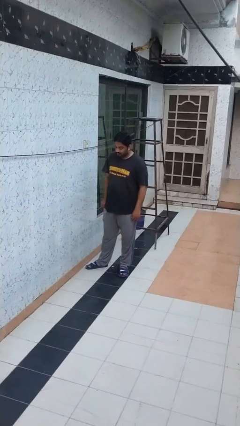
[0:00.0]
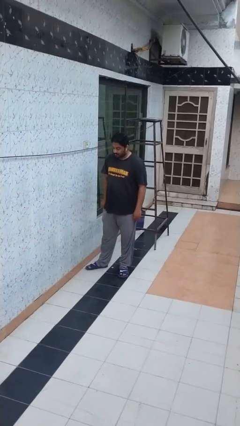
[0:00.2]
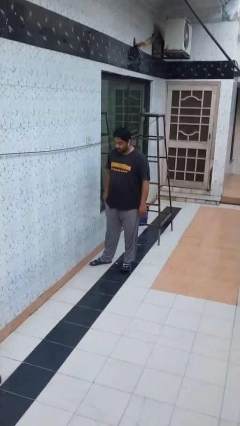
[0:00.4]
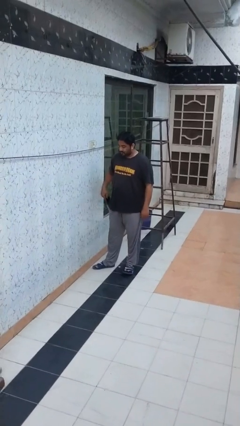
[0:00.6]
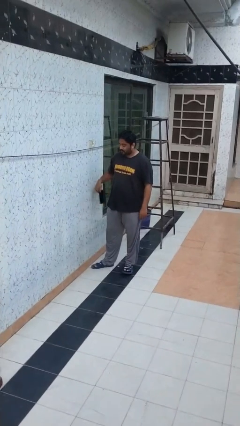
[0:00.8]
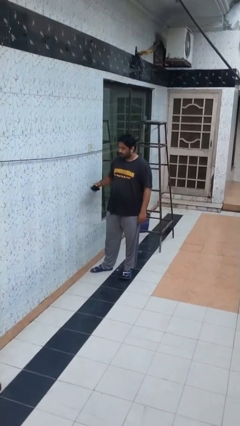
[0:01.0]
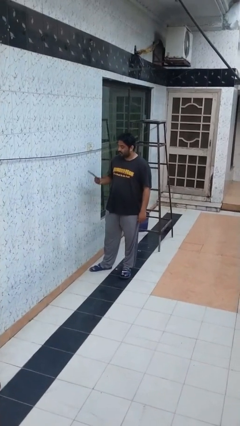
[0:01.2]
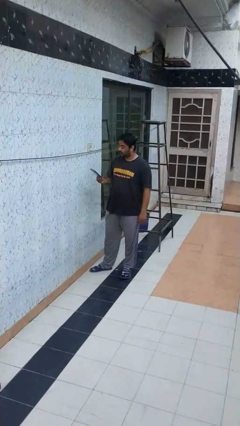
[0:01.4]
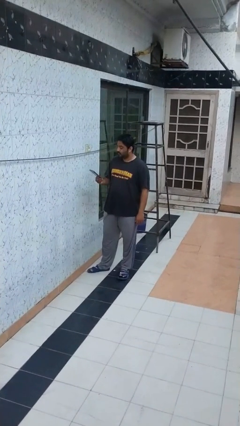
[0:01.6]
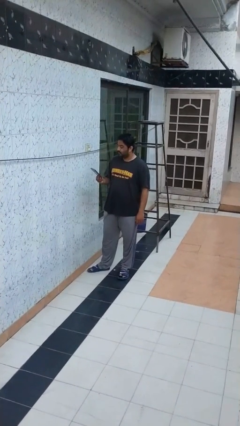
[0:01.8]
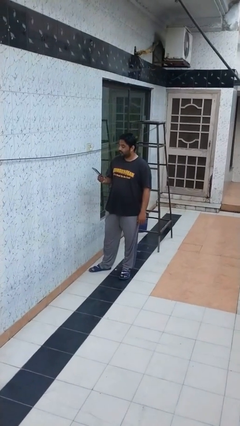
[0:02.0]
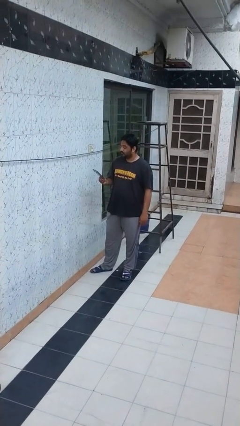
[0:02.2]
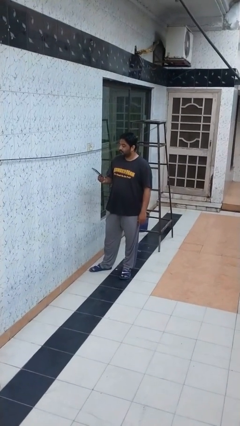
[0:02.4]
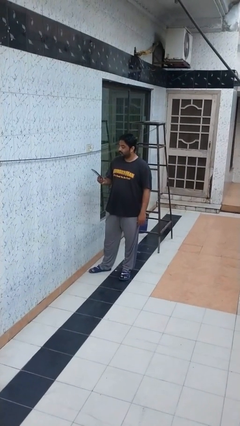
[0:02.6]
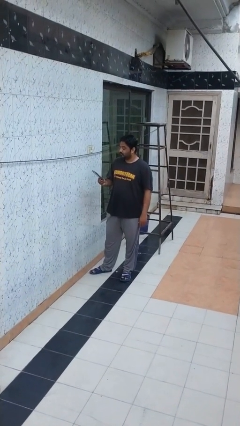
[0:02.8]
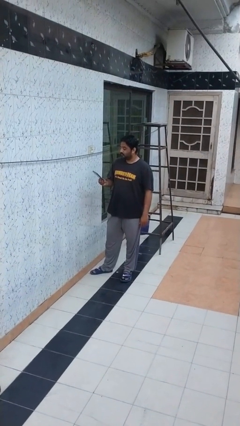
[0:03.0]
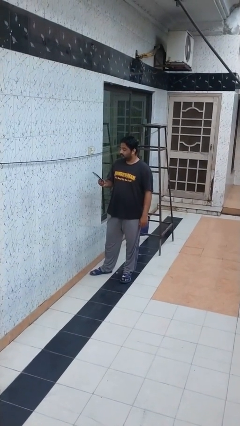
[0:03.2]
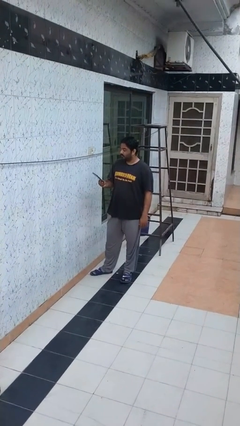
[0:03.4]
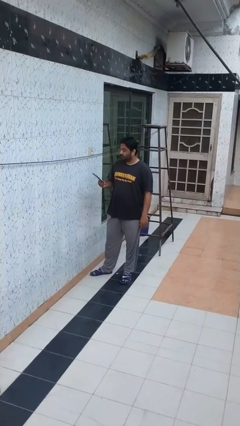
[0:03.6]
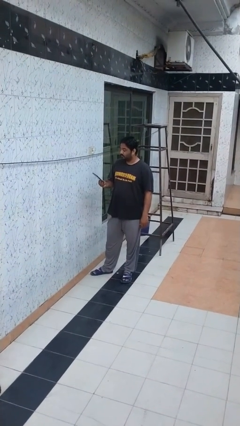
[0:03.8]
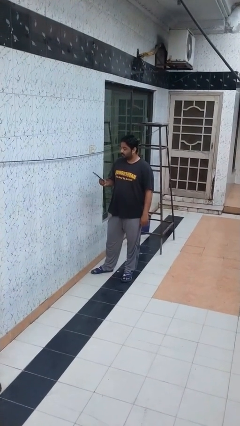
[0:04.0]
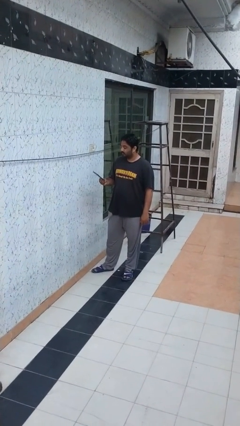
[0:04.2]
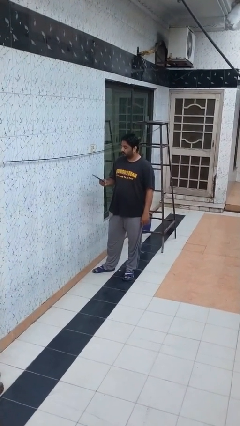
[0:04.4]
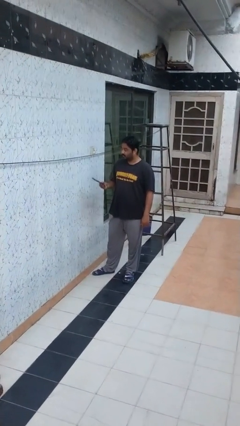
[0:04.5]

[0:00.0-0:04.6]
person takes phone from pocket

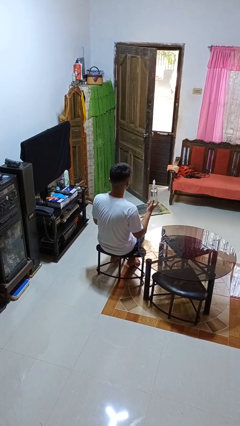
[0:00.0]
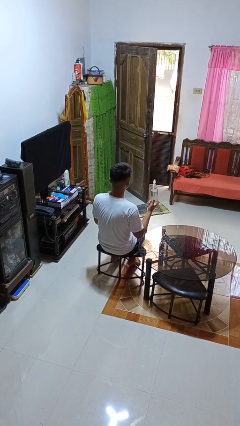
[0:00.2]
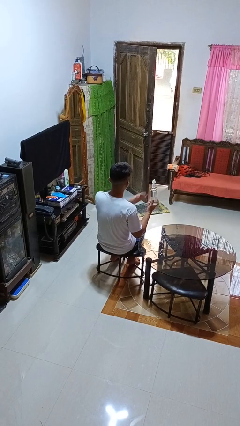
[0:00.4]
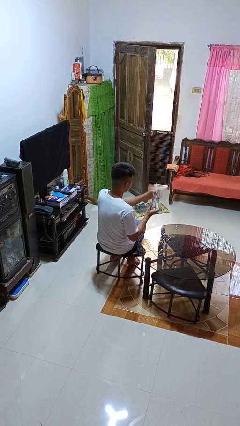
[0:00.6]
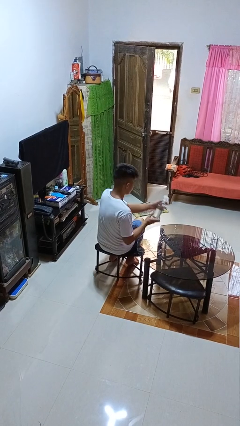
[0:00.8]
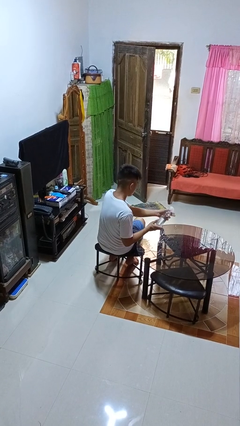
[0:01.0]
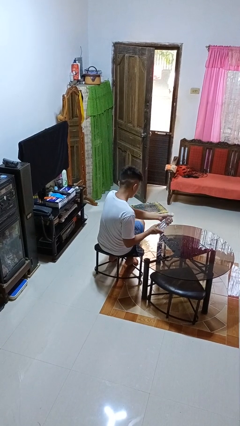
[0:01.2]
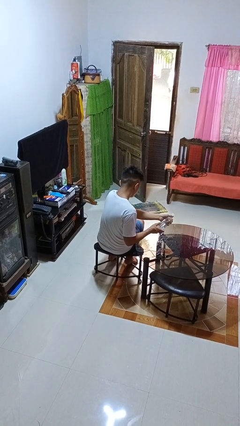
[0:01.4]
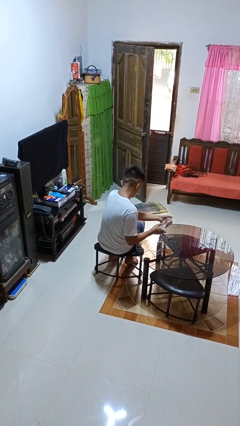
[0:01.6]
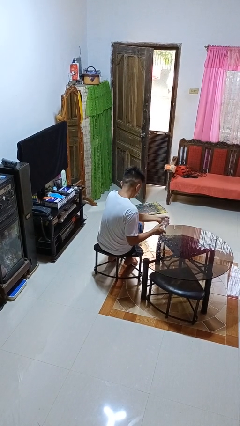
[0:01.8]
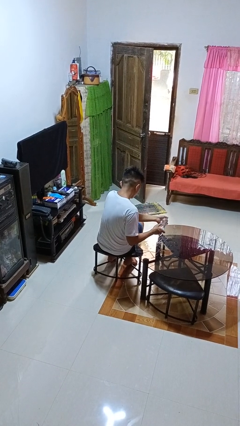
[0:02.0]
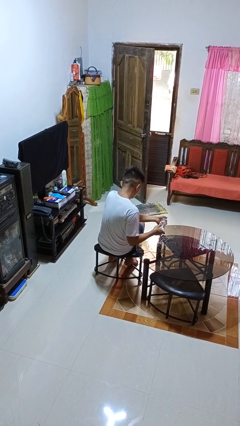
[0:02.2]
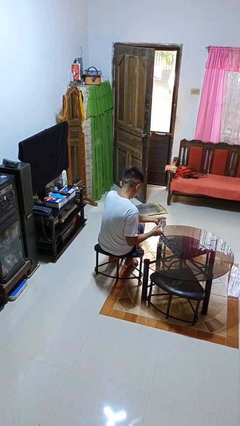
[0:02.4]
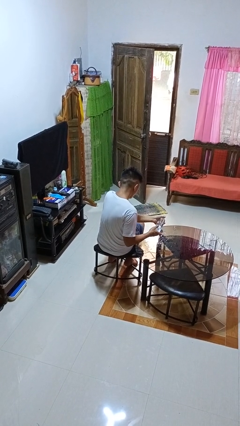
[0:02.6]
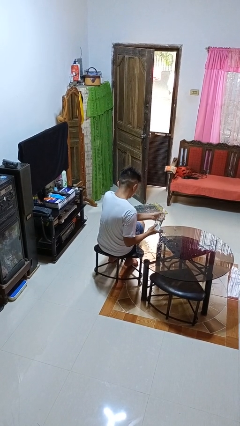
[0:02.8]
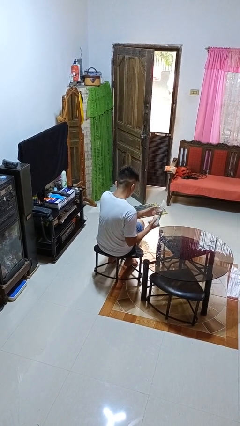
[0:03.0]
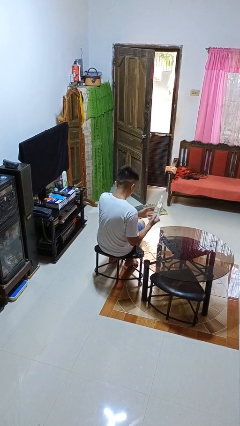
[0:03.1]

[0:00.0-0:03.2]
person sprays from bottle

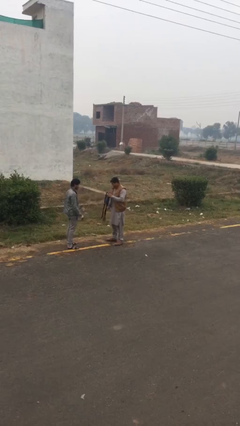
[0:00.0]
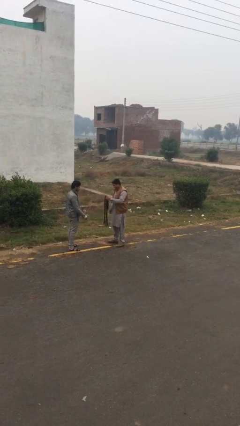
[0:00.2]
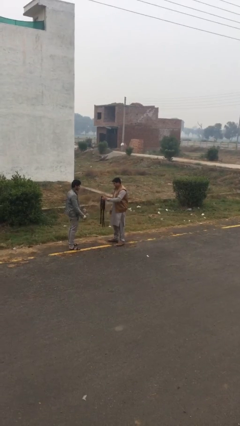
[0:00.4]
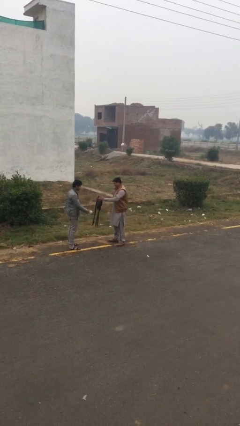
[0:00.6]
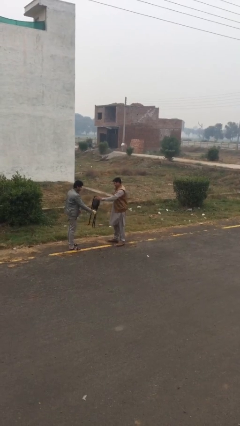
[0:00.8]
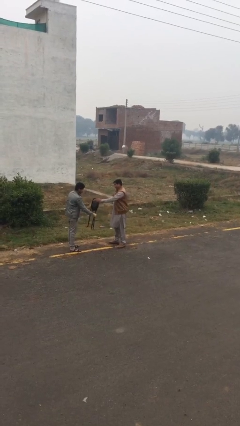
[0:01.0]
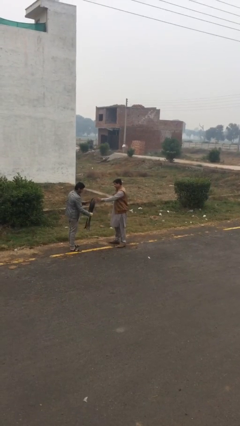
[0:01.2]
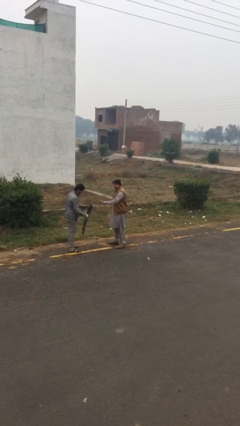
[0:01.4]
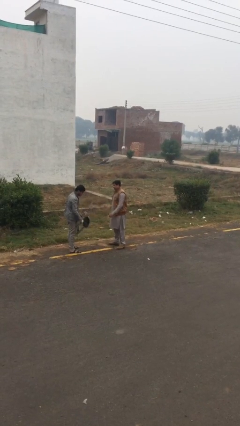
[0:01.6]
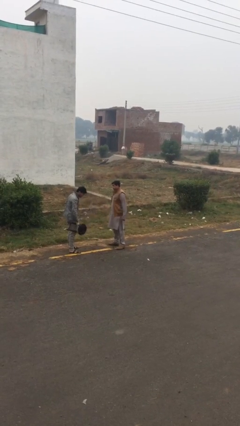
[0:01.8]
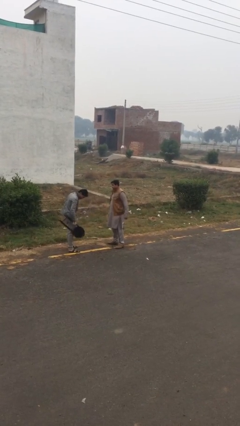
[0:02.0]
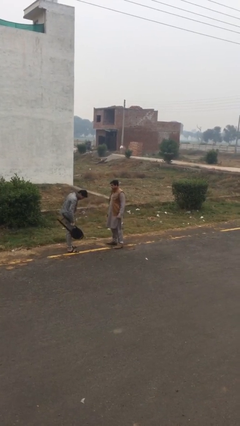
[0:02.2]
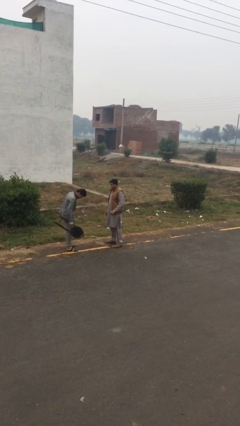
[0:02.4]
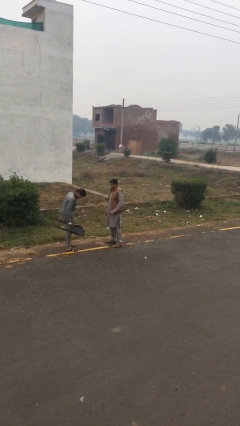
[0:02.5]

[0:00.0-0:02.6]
person transfers object to person

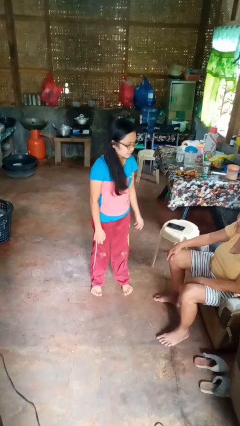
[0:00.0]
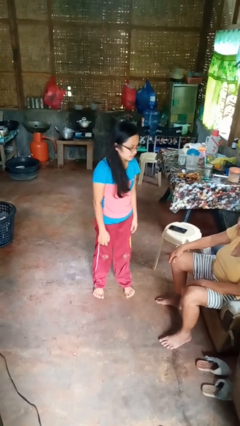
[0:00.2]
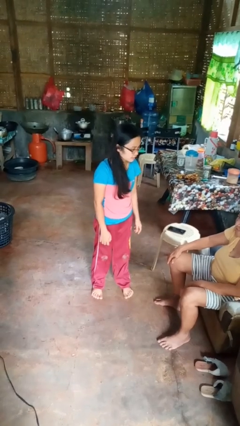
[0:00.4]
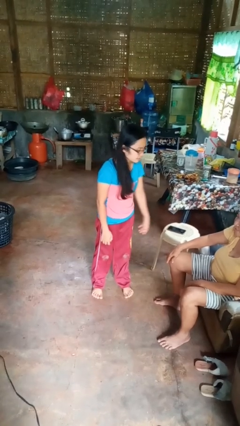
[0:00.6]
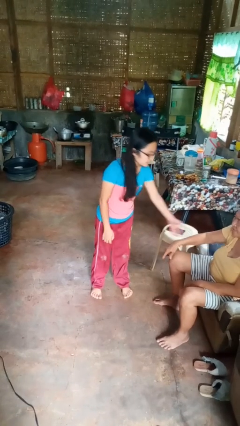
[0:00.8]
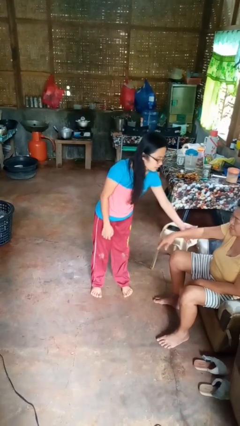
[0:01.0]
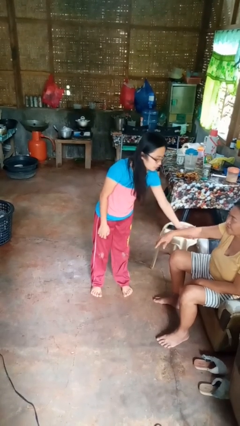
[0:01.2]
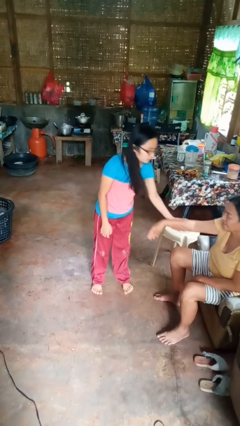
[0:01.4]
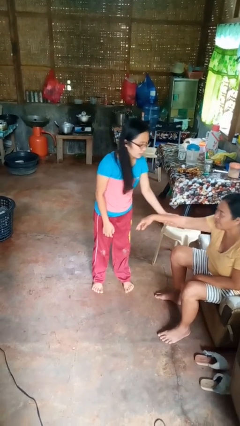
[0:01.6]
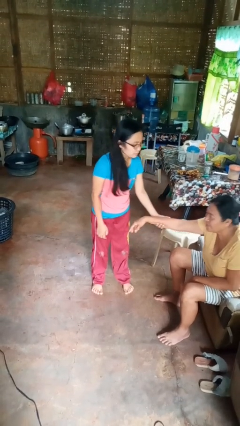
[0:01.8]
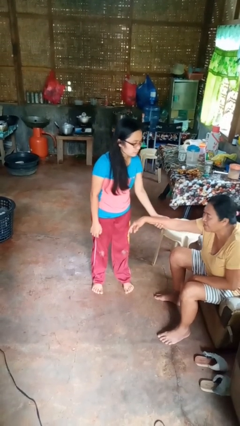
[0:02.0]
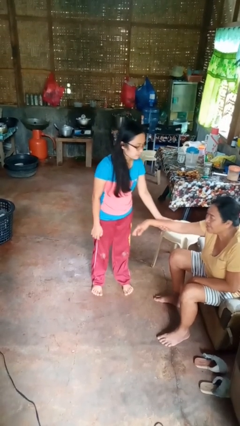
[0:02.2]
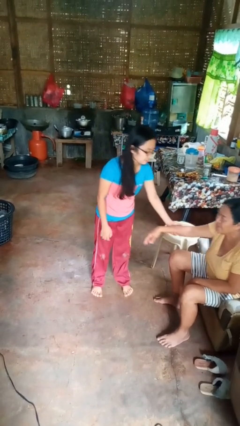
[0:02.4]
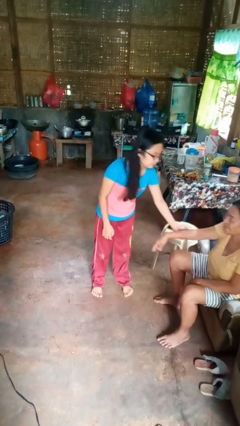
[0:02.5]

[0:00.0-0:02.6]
person grabs person by forearm

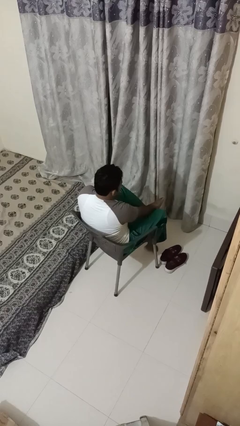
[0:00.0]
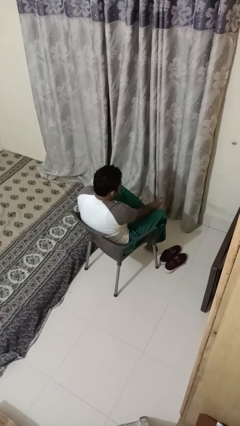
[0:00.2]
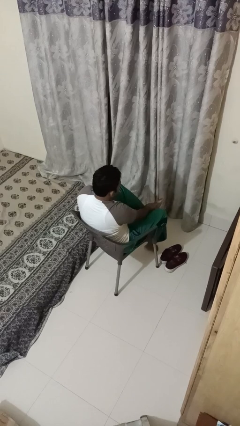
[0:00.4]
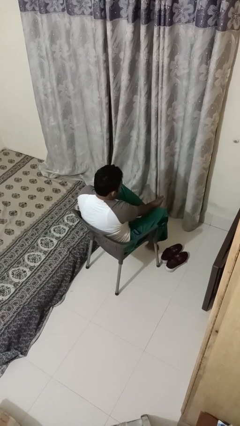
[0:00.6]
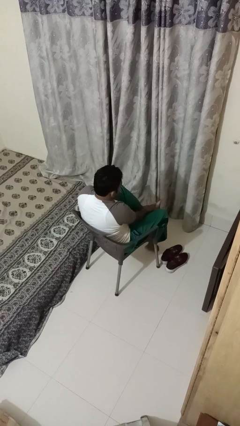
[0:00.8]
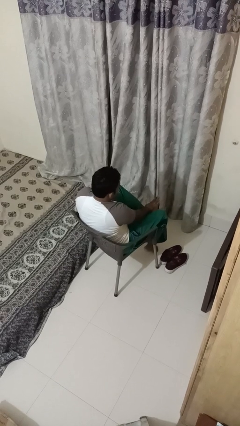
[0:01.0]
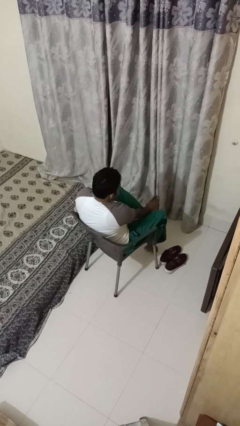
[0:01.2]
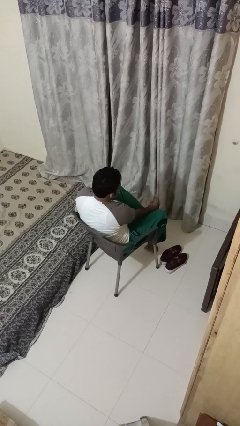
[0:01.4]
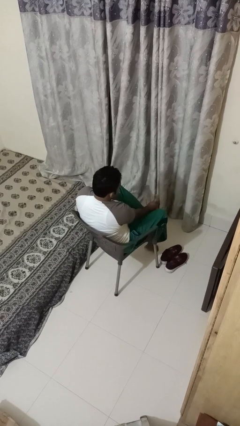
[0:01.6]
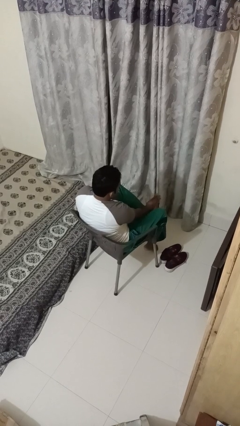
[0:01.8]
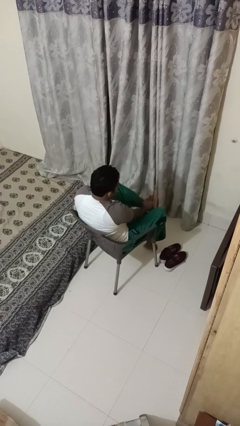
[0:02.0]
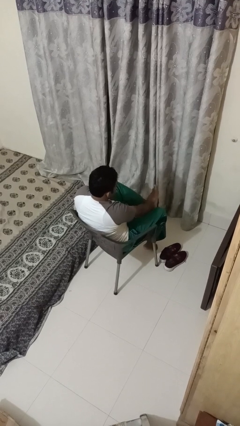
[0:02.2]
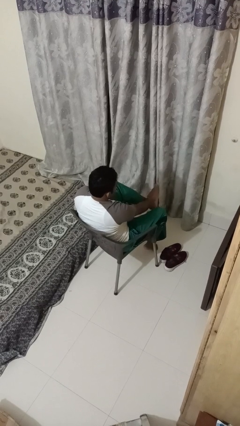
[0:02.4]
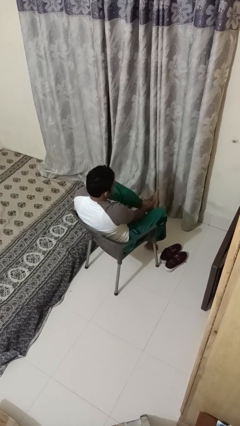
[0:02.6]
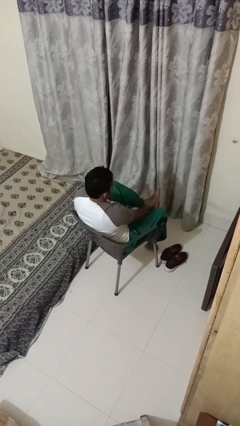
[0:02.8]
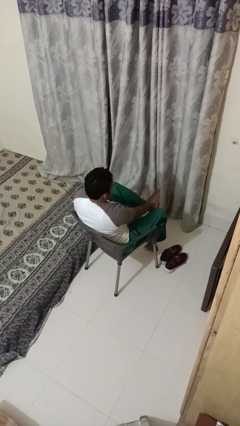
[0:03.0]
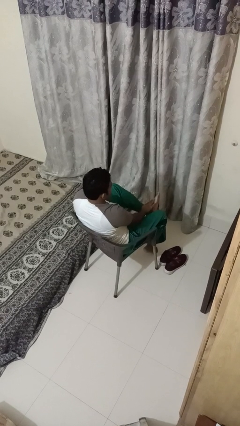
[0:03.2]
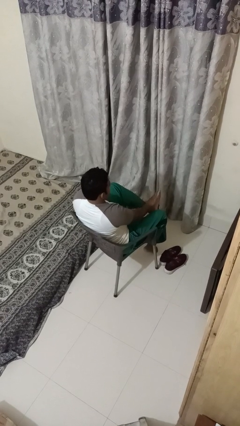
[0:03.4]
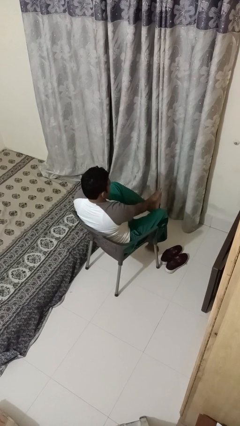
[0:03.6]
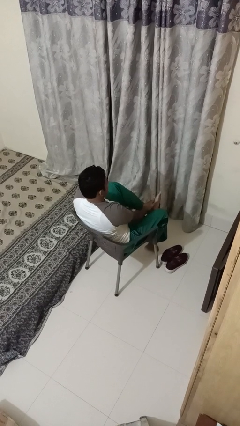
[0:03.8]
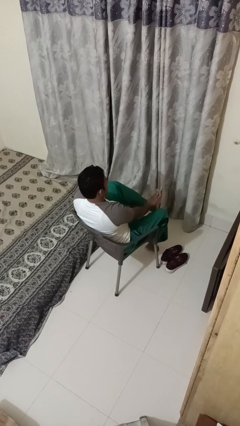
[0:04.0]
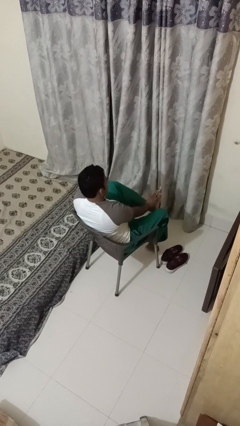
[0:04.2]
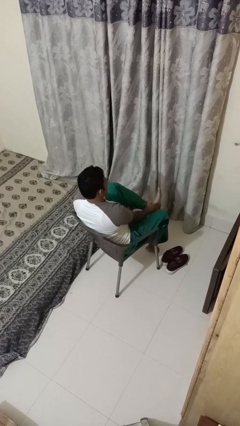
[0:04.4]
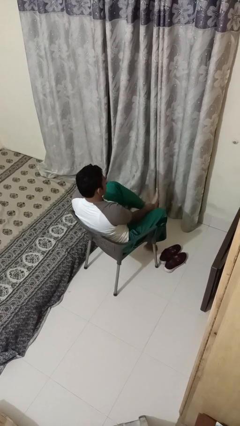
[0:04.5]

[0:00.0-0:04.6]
person rubs foot
